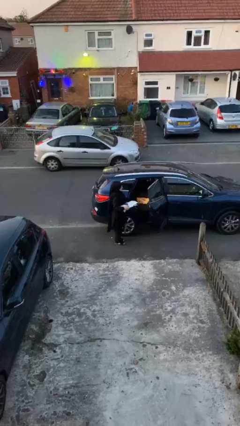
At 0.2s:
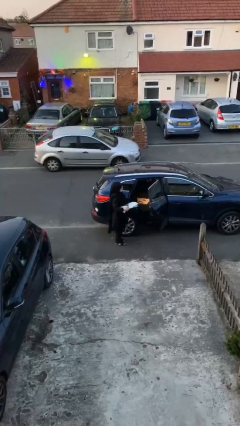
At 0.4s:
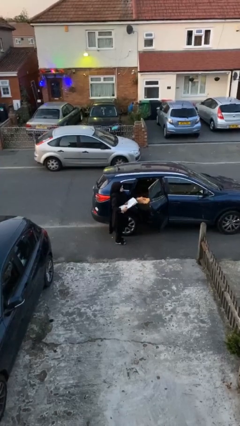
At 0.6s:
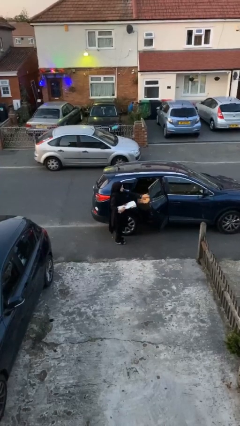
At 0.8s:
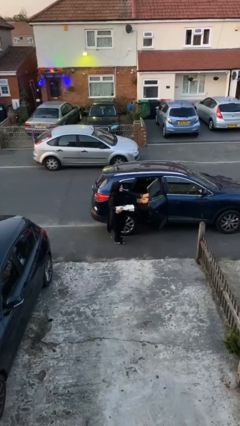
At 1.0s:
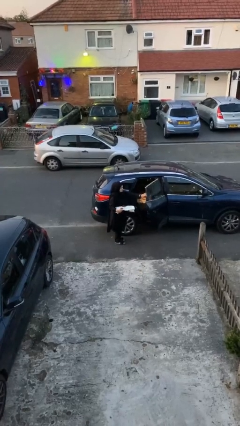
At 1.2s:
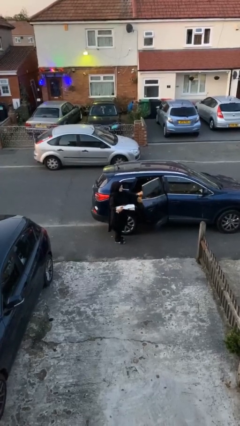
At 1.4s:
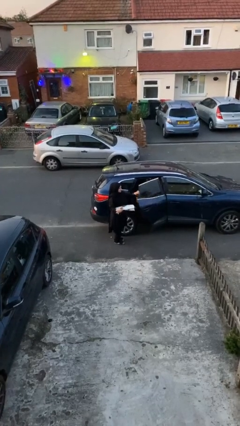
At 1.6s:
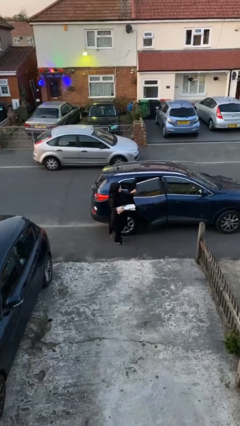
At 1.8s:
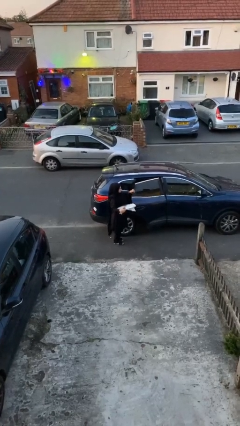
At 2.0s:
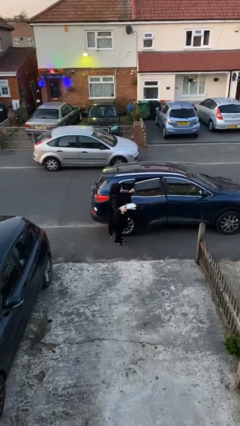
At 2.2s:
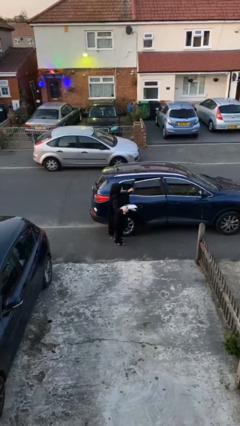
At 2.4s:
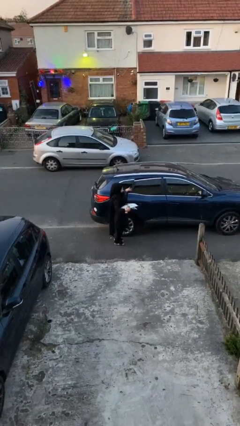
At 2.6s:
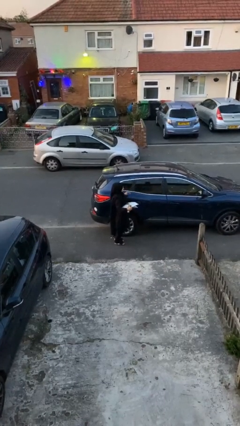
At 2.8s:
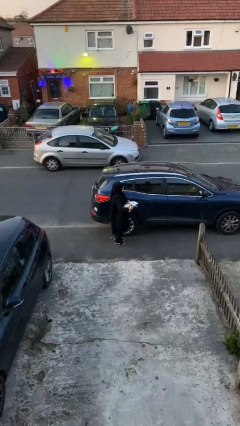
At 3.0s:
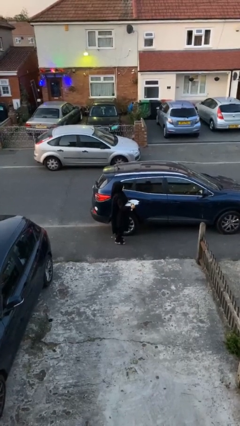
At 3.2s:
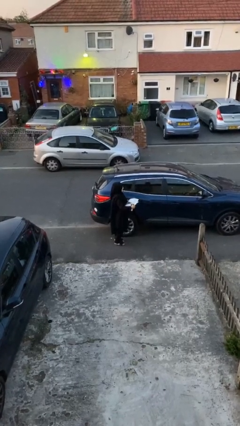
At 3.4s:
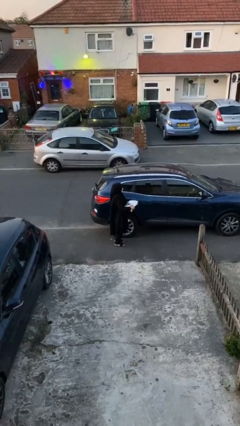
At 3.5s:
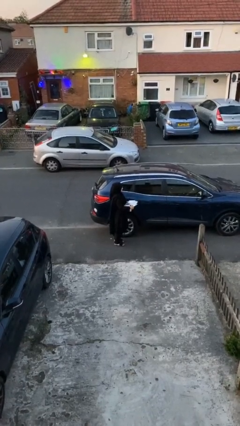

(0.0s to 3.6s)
person closes car door

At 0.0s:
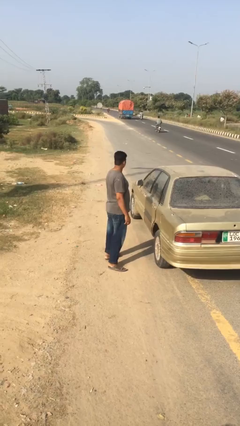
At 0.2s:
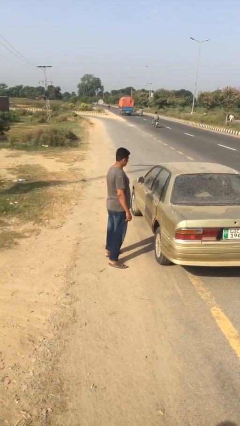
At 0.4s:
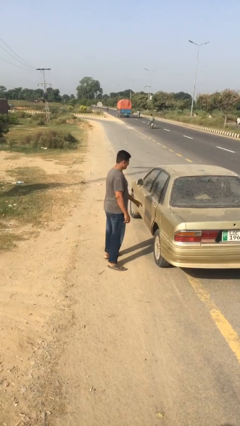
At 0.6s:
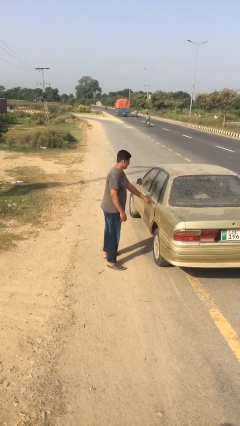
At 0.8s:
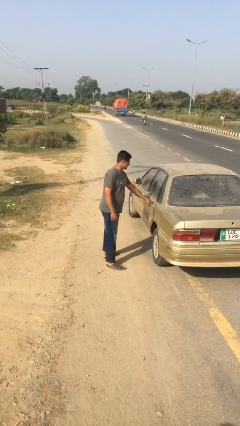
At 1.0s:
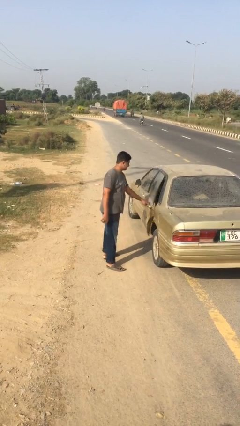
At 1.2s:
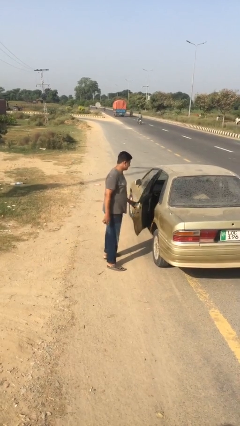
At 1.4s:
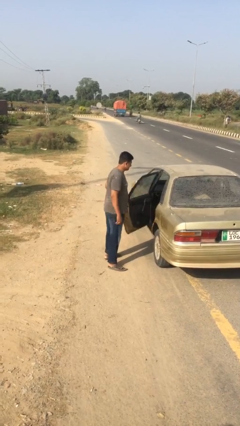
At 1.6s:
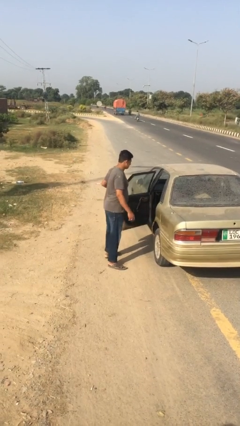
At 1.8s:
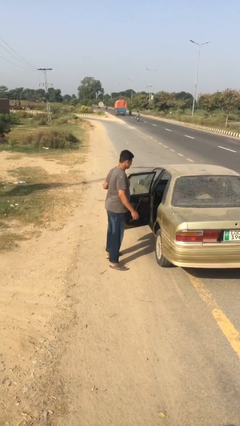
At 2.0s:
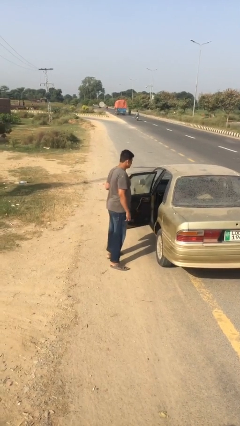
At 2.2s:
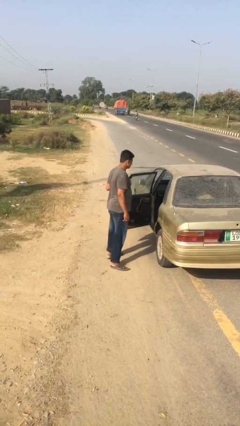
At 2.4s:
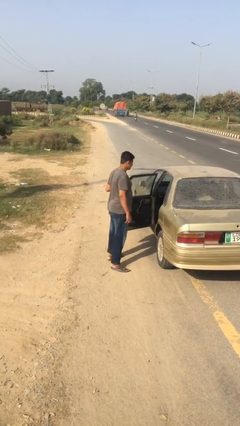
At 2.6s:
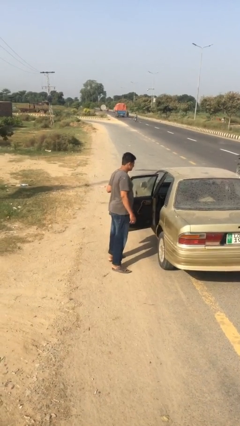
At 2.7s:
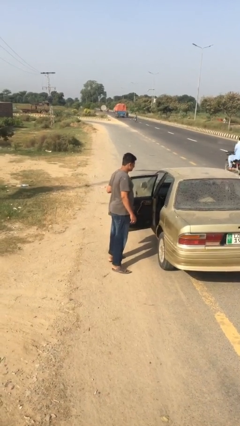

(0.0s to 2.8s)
person opens car door

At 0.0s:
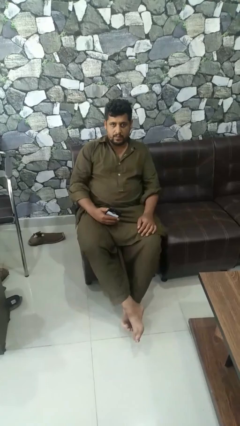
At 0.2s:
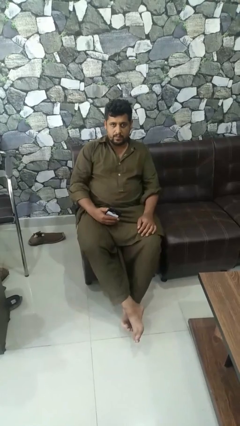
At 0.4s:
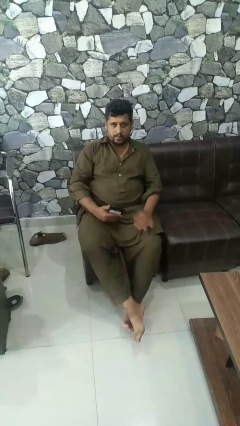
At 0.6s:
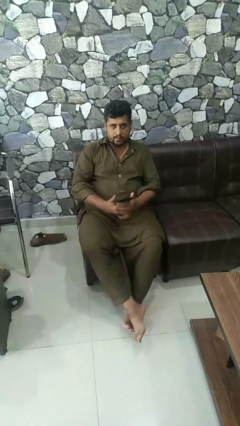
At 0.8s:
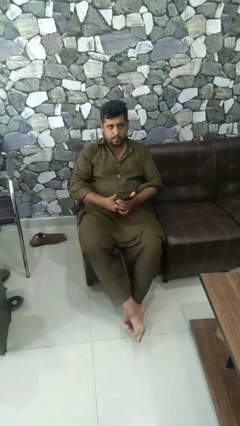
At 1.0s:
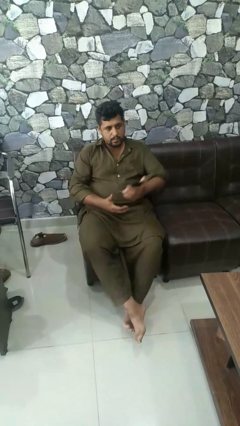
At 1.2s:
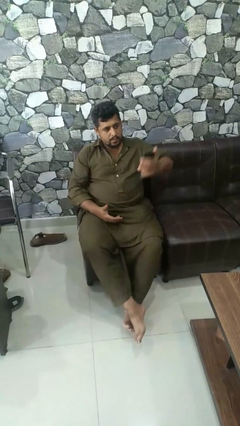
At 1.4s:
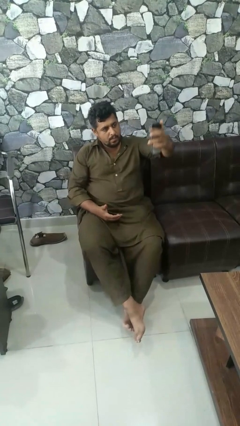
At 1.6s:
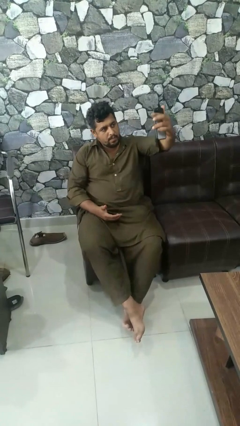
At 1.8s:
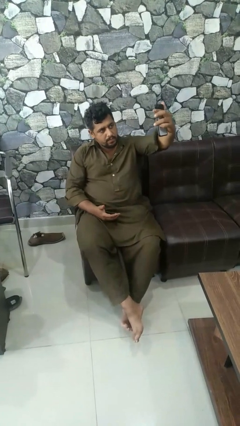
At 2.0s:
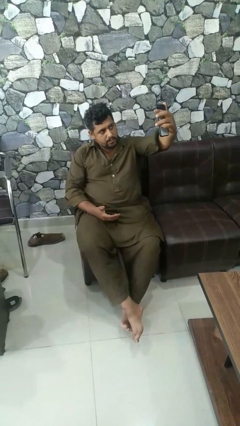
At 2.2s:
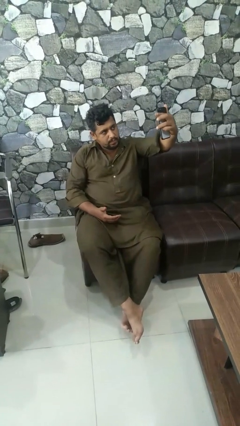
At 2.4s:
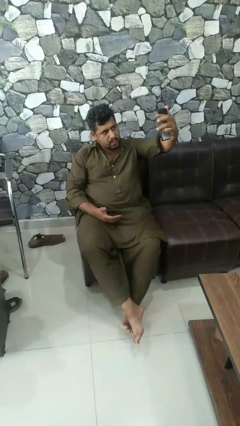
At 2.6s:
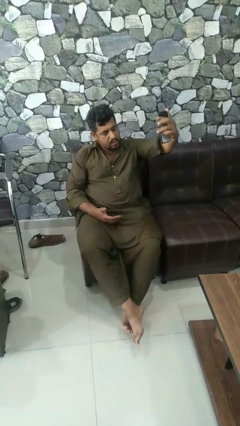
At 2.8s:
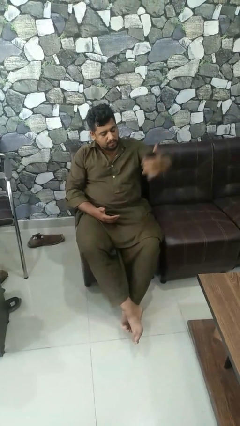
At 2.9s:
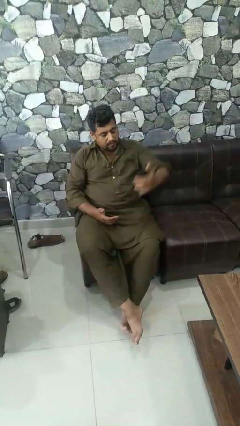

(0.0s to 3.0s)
person takes selfie

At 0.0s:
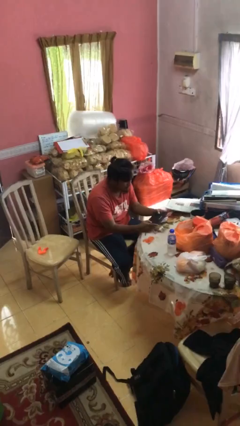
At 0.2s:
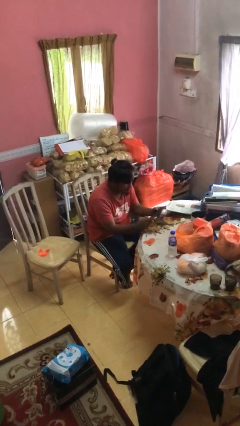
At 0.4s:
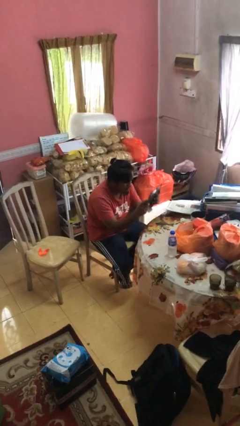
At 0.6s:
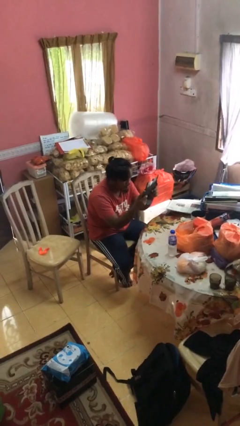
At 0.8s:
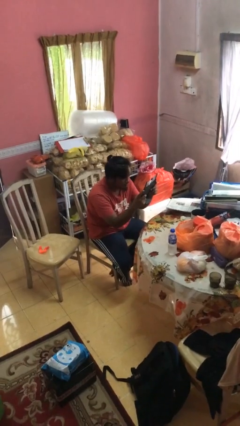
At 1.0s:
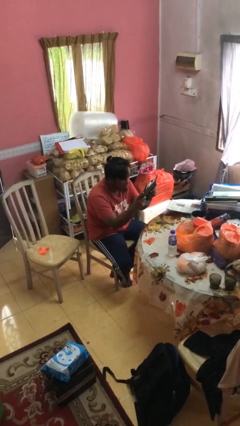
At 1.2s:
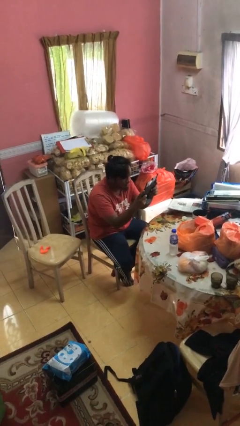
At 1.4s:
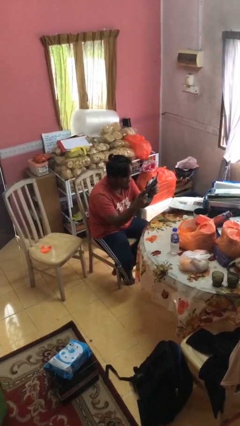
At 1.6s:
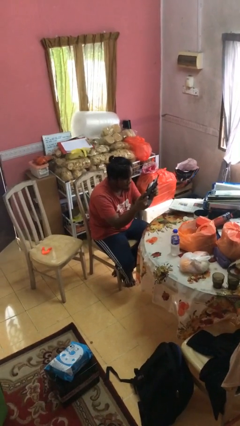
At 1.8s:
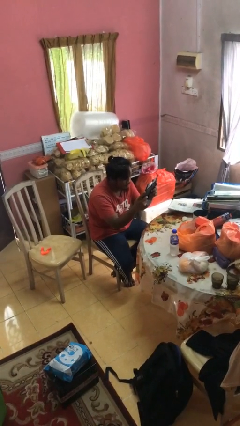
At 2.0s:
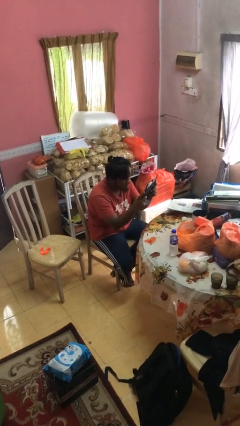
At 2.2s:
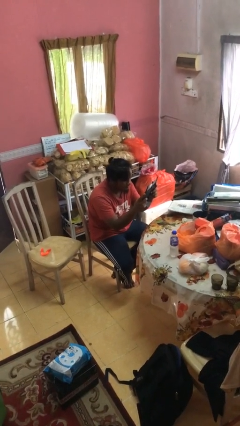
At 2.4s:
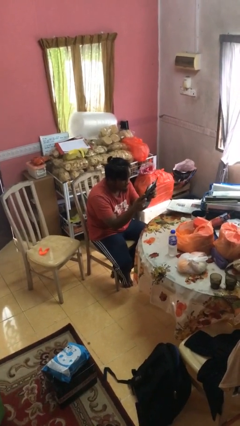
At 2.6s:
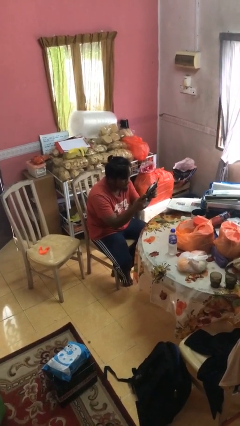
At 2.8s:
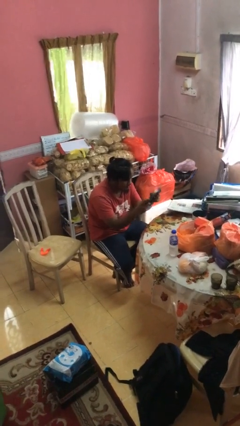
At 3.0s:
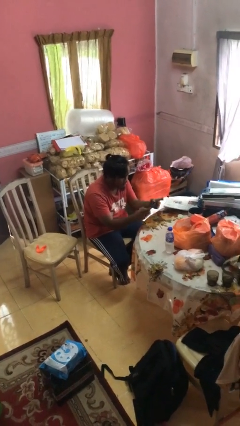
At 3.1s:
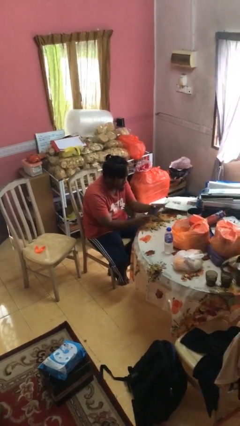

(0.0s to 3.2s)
person interacts with handheld game

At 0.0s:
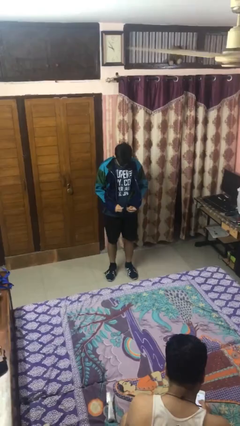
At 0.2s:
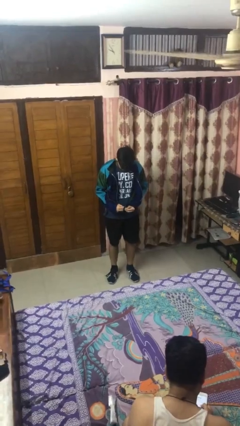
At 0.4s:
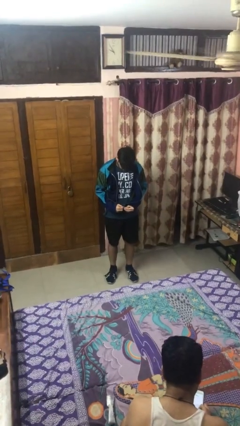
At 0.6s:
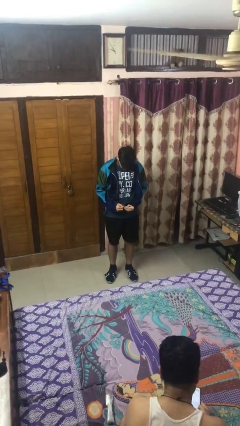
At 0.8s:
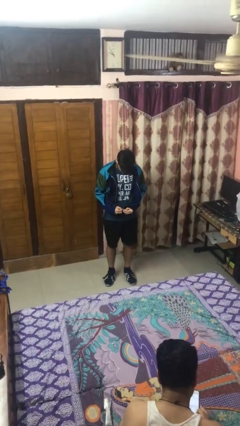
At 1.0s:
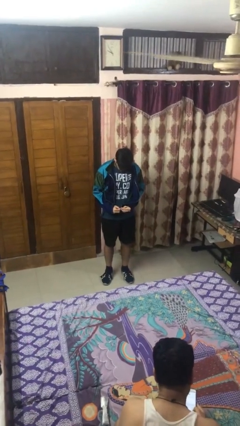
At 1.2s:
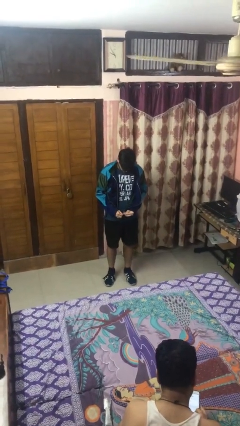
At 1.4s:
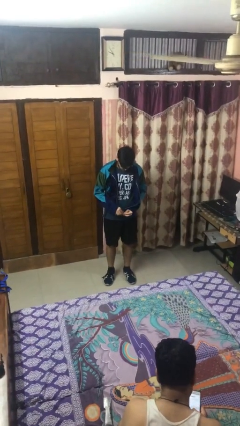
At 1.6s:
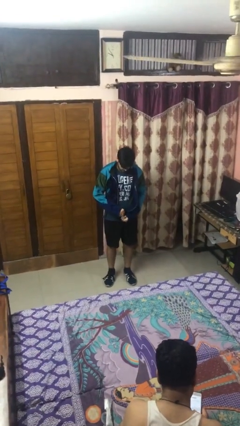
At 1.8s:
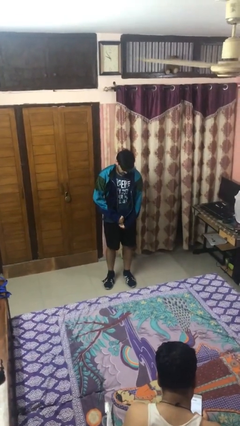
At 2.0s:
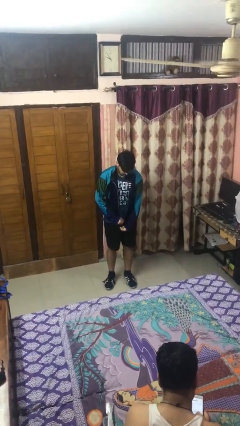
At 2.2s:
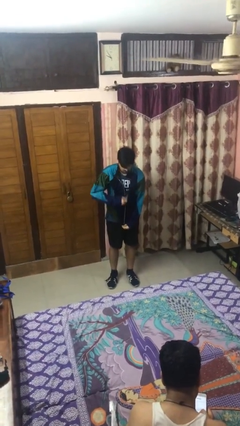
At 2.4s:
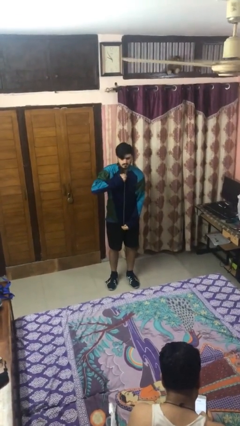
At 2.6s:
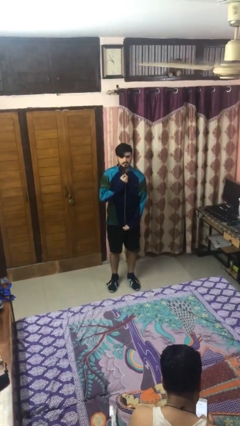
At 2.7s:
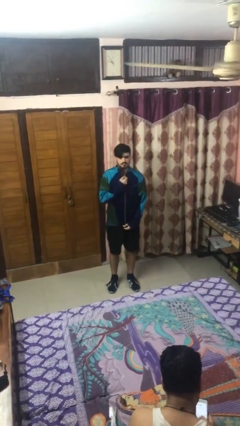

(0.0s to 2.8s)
person zips up jacket

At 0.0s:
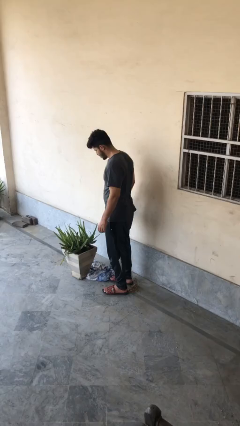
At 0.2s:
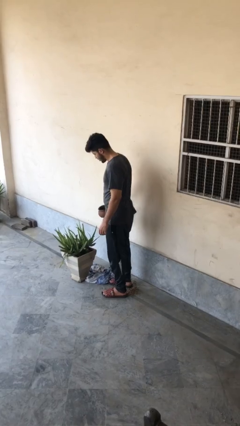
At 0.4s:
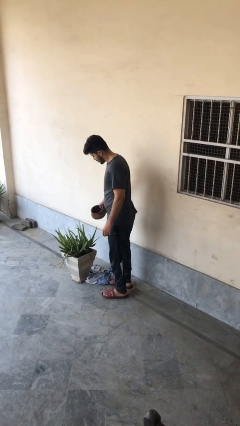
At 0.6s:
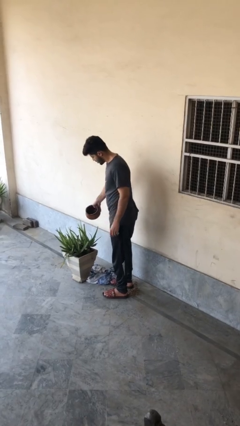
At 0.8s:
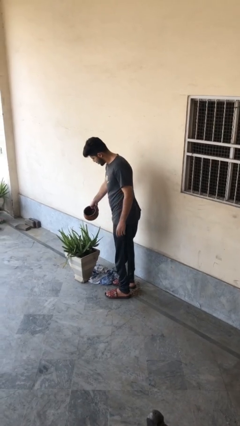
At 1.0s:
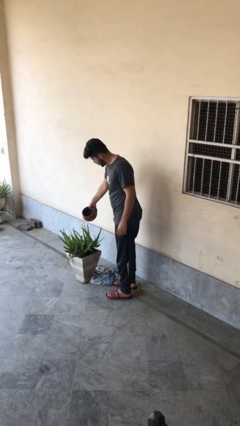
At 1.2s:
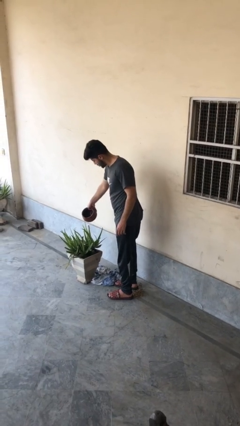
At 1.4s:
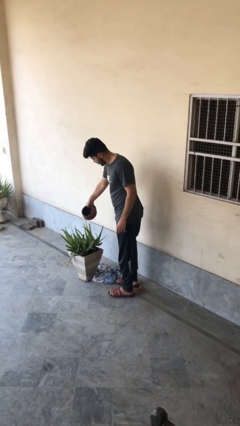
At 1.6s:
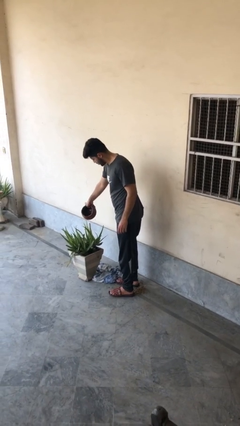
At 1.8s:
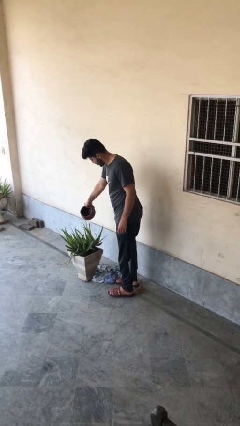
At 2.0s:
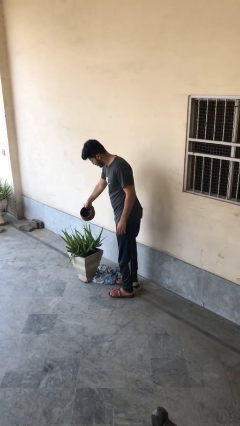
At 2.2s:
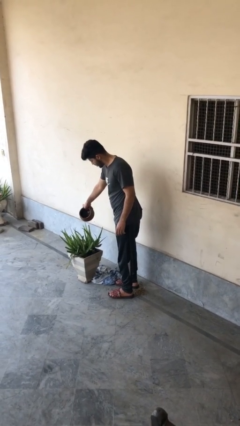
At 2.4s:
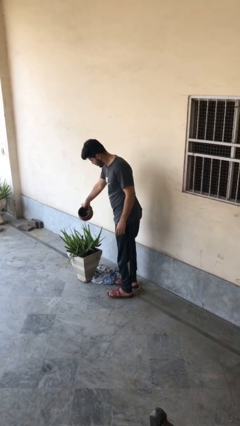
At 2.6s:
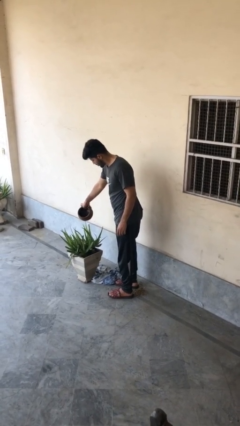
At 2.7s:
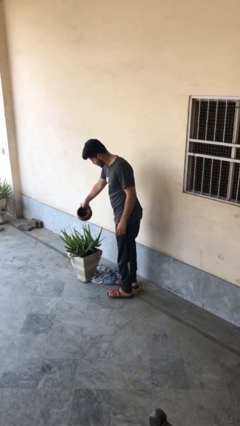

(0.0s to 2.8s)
person waters houseplant
